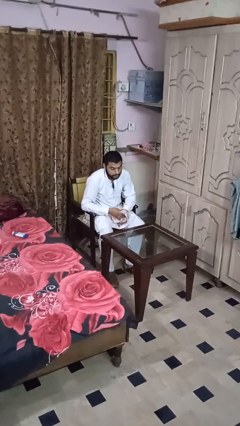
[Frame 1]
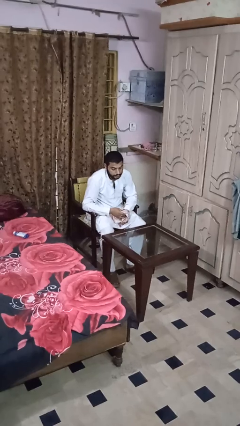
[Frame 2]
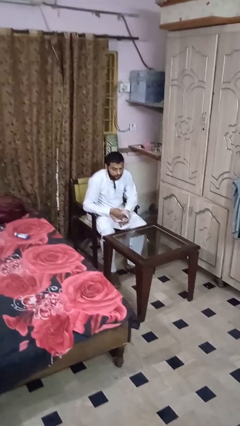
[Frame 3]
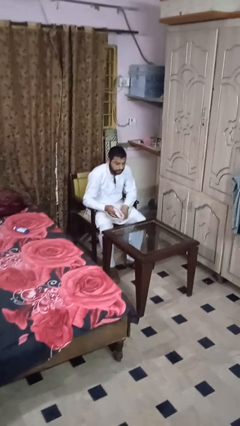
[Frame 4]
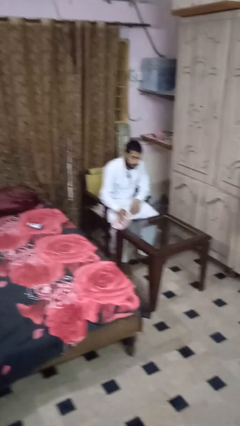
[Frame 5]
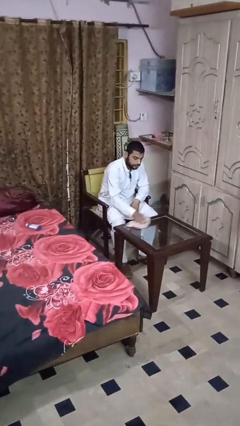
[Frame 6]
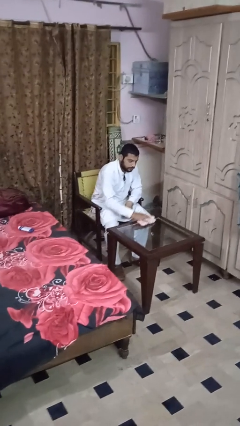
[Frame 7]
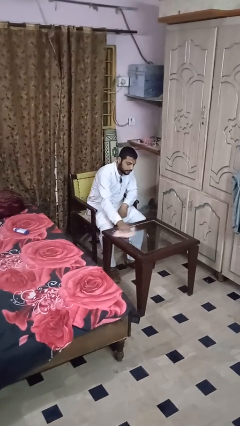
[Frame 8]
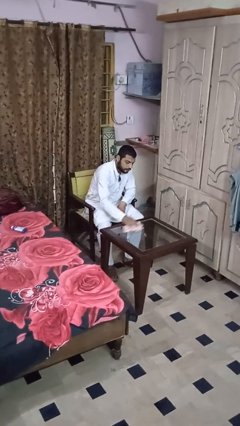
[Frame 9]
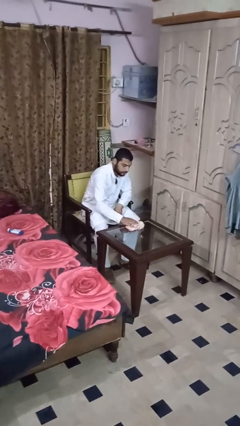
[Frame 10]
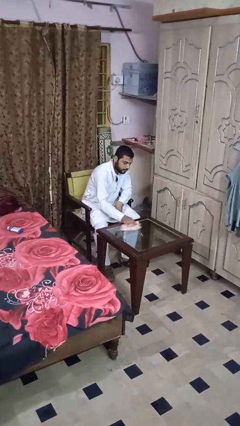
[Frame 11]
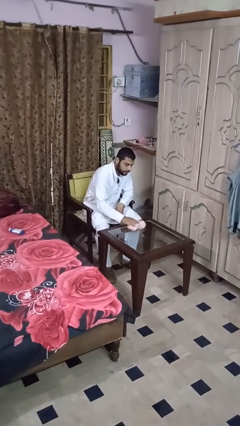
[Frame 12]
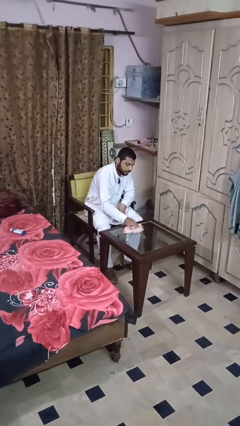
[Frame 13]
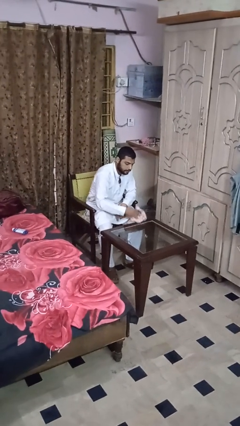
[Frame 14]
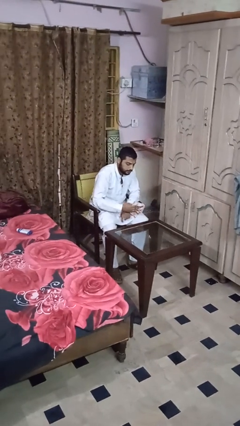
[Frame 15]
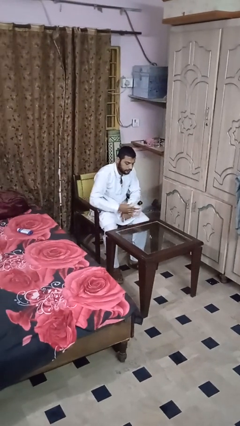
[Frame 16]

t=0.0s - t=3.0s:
person cleans table with rag

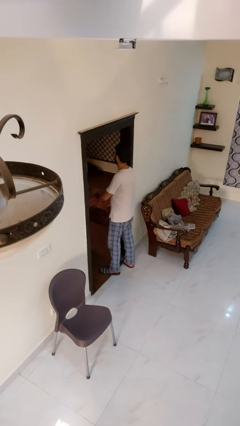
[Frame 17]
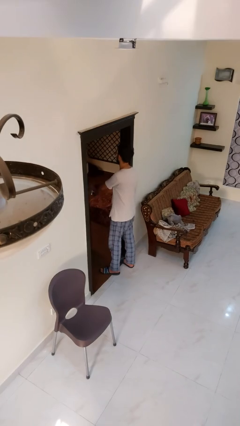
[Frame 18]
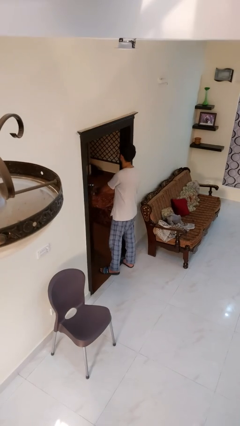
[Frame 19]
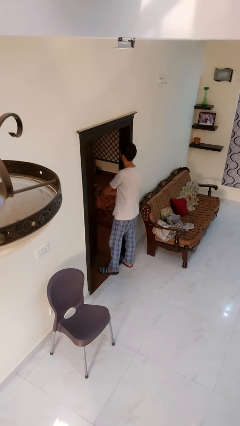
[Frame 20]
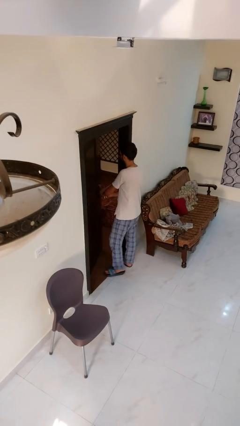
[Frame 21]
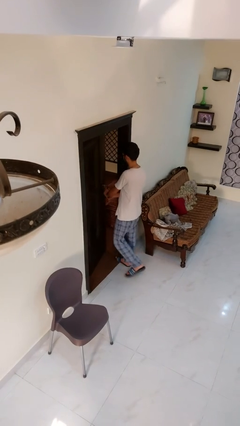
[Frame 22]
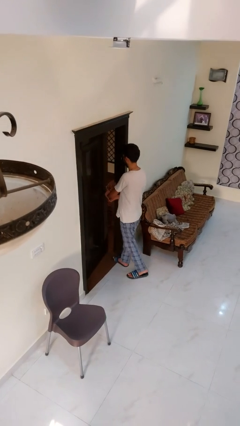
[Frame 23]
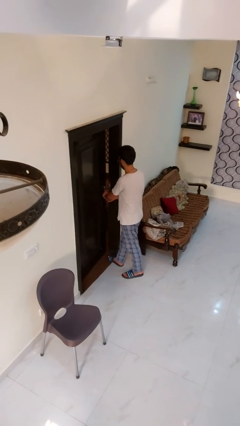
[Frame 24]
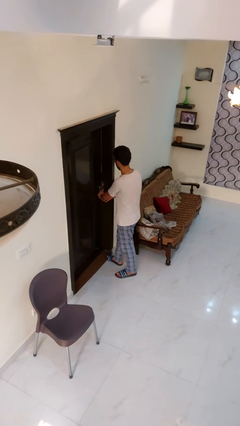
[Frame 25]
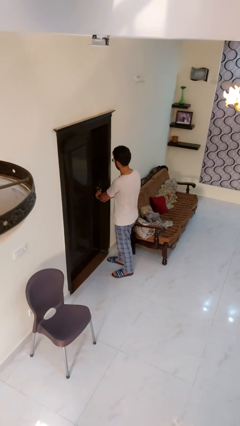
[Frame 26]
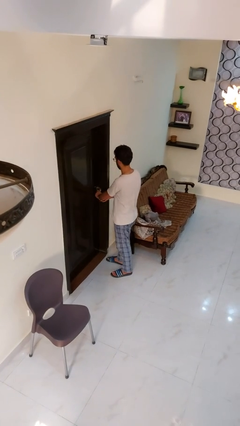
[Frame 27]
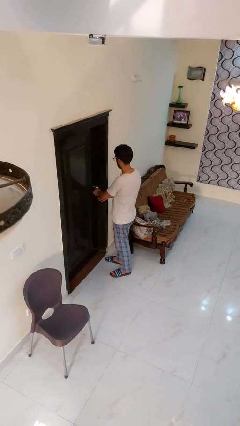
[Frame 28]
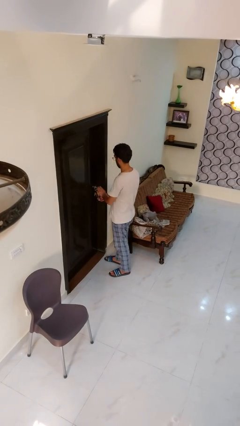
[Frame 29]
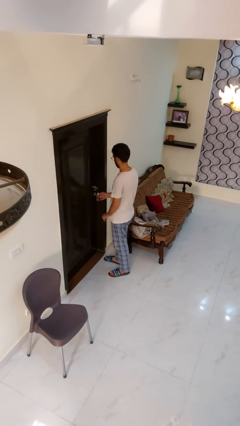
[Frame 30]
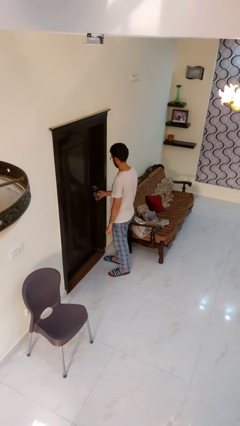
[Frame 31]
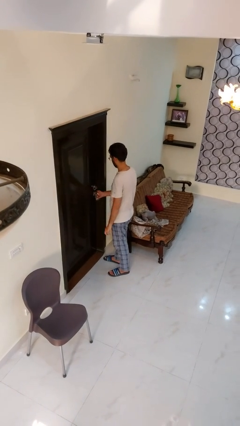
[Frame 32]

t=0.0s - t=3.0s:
person closes facility door

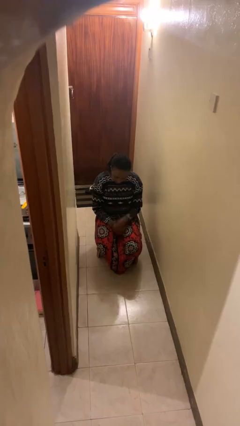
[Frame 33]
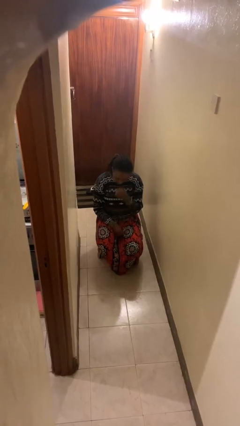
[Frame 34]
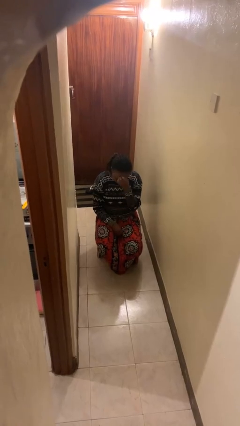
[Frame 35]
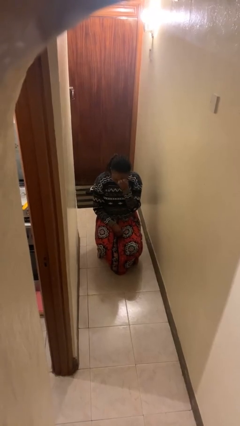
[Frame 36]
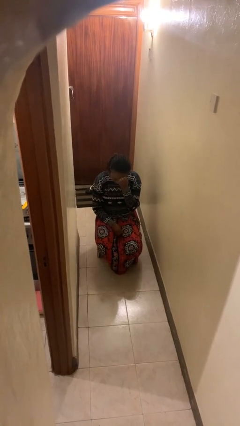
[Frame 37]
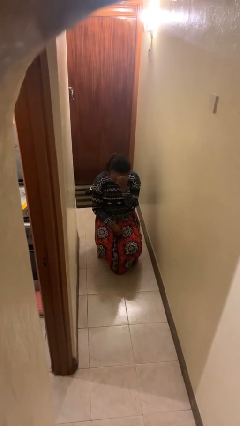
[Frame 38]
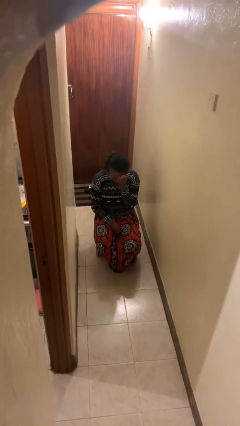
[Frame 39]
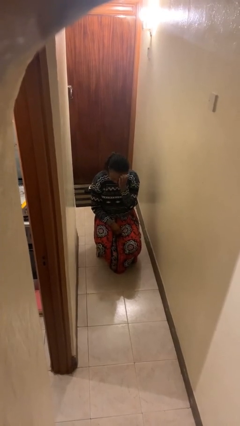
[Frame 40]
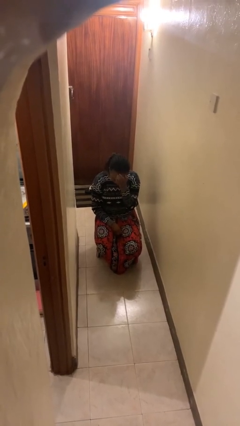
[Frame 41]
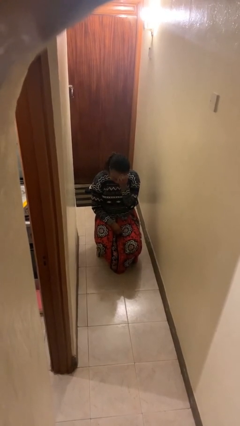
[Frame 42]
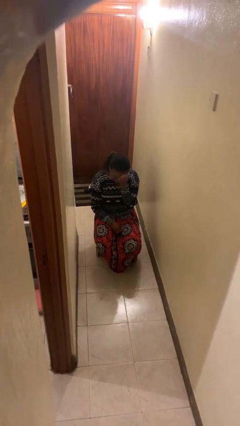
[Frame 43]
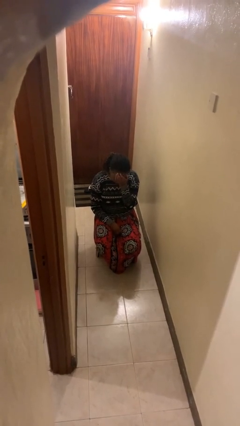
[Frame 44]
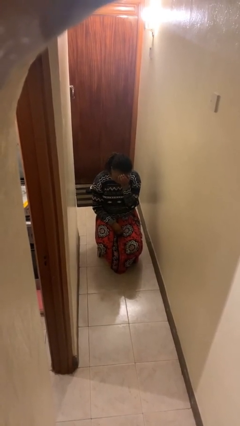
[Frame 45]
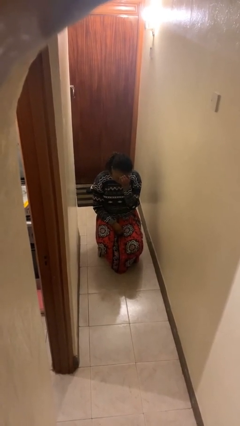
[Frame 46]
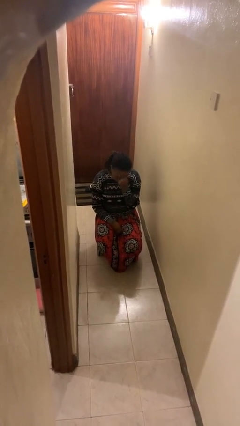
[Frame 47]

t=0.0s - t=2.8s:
person scratches face

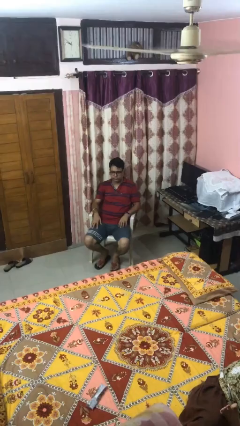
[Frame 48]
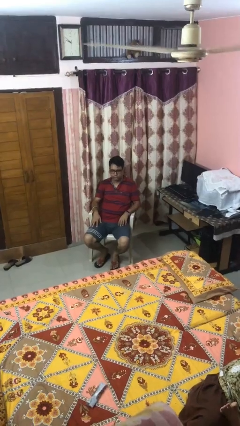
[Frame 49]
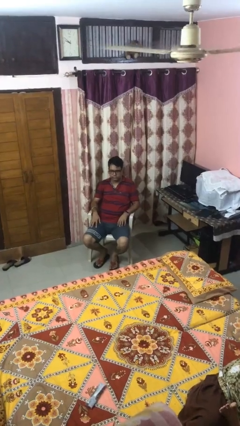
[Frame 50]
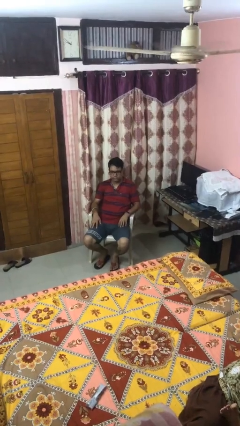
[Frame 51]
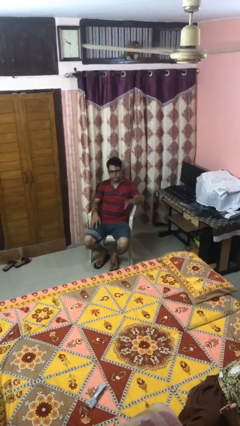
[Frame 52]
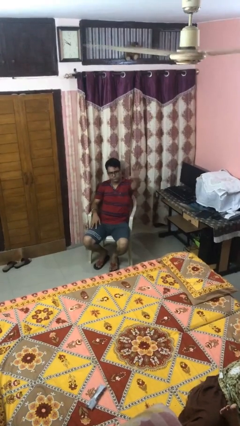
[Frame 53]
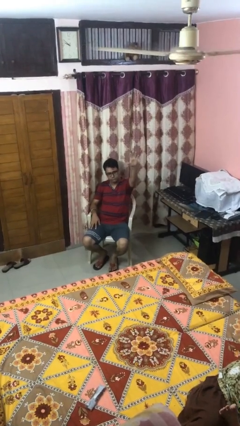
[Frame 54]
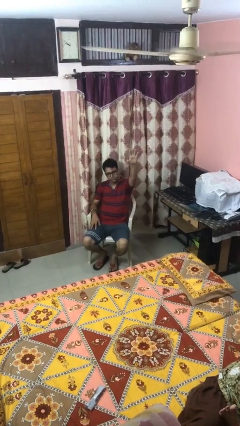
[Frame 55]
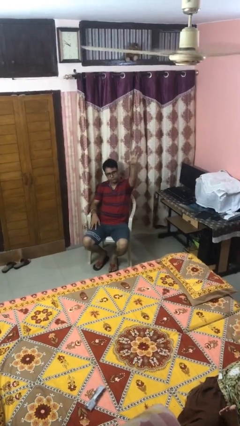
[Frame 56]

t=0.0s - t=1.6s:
person gestures raise hand

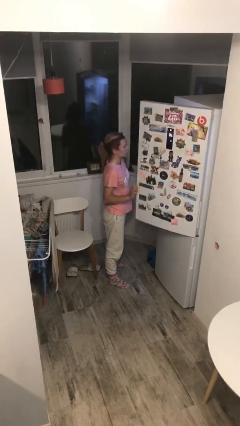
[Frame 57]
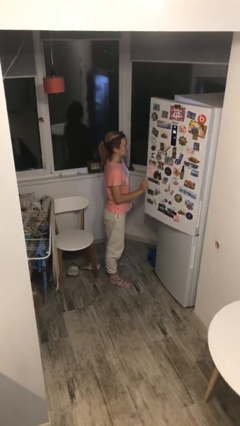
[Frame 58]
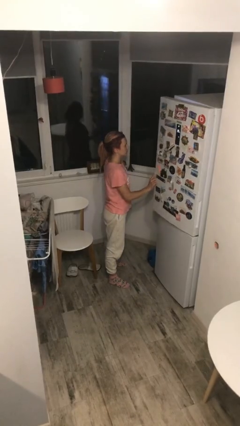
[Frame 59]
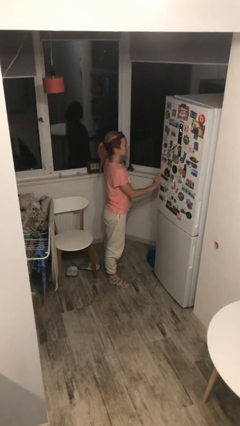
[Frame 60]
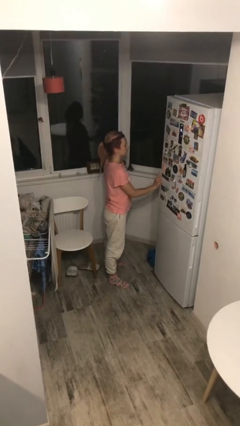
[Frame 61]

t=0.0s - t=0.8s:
person closes refrigerator

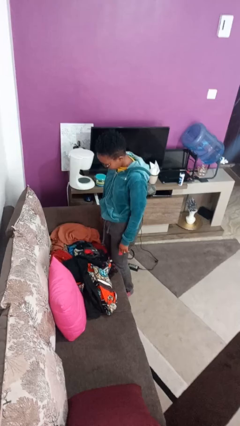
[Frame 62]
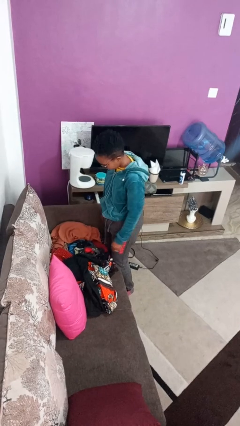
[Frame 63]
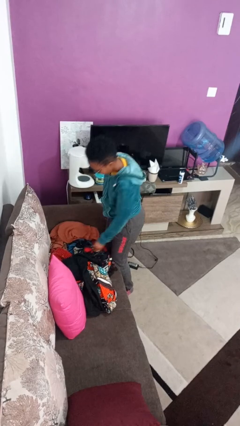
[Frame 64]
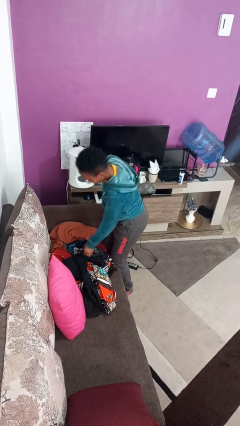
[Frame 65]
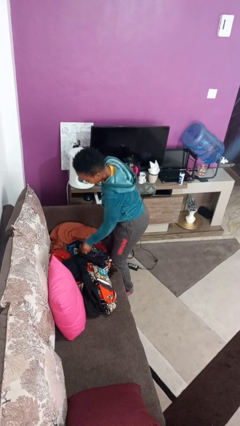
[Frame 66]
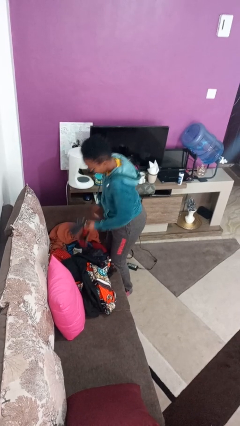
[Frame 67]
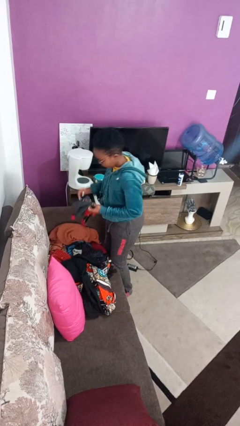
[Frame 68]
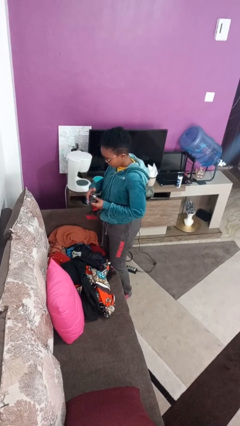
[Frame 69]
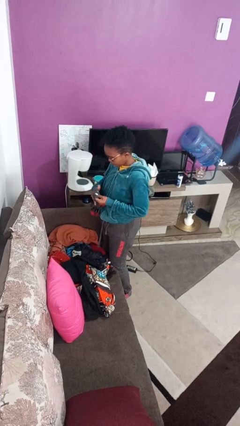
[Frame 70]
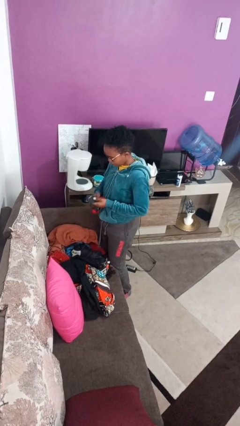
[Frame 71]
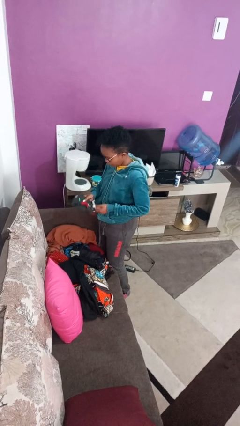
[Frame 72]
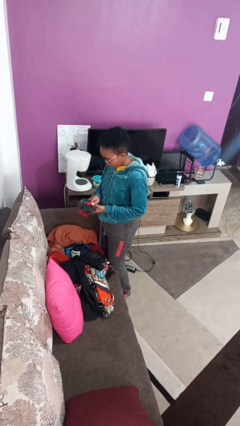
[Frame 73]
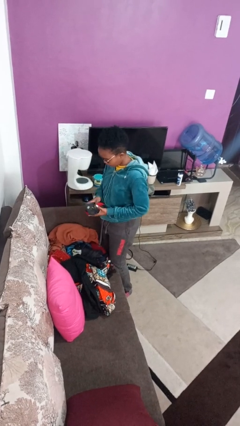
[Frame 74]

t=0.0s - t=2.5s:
person folds socks

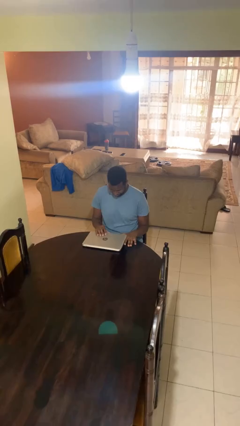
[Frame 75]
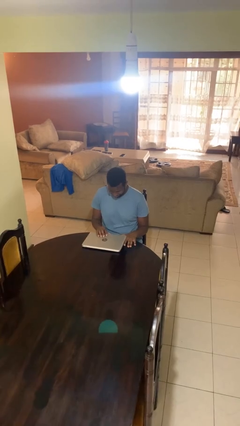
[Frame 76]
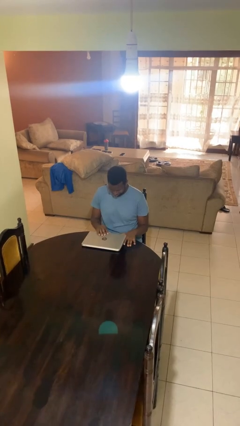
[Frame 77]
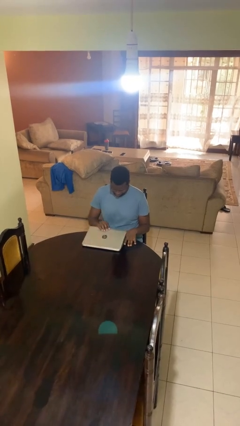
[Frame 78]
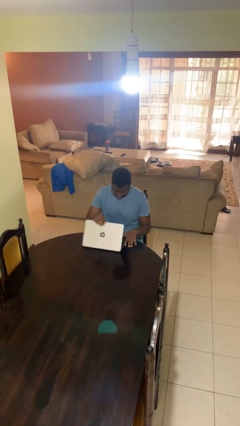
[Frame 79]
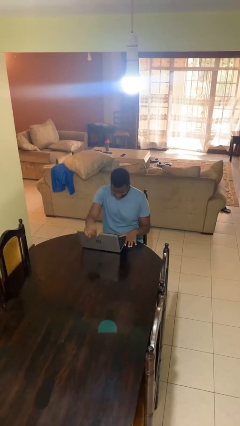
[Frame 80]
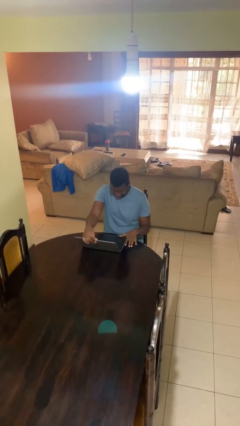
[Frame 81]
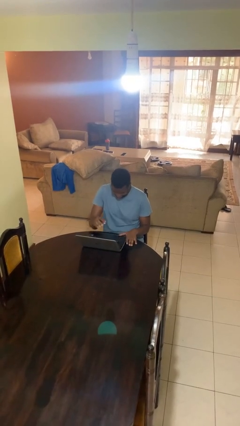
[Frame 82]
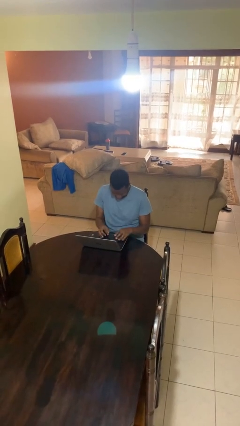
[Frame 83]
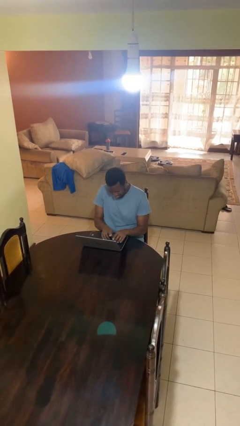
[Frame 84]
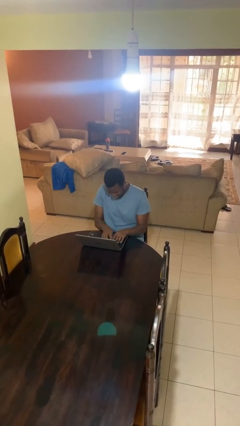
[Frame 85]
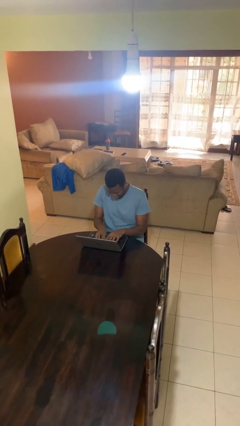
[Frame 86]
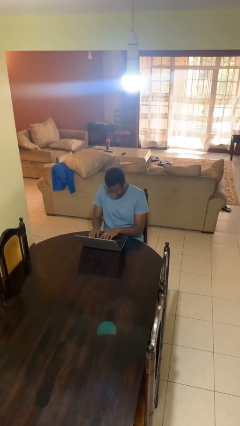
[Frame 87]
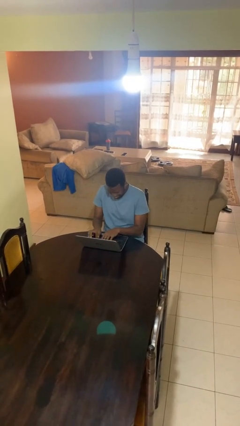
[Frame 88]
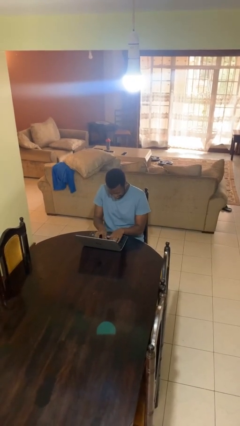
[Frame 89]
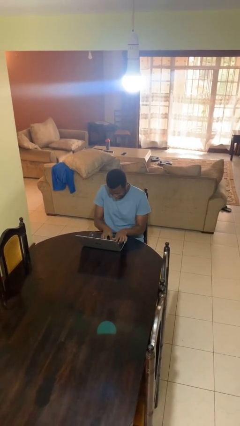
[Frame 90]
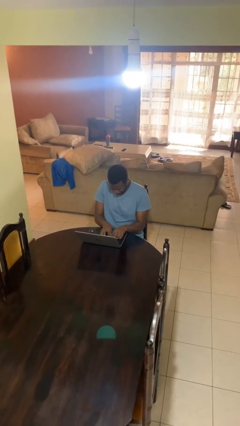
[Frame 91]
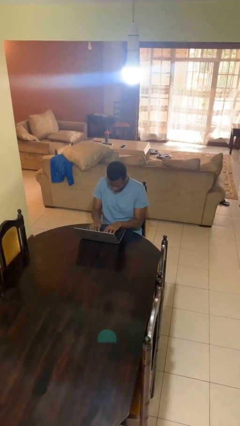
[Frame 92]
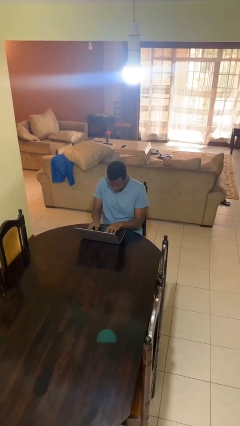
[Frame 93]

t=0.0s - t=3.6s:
person interacts with laptop
